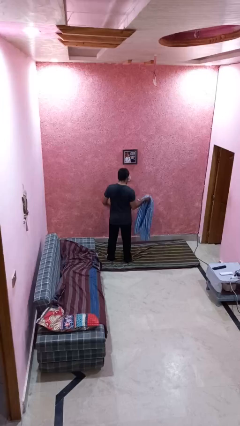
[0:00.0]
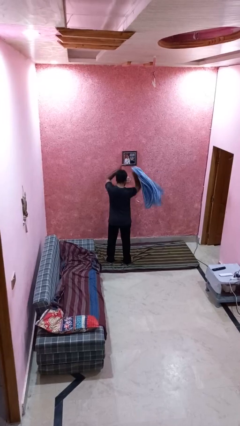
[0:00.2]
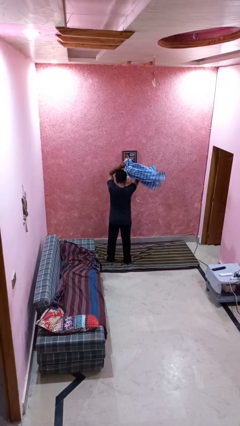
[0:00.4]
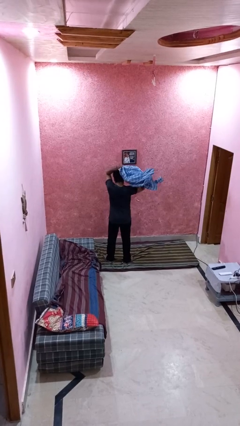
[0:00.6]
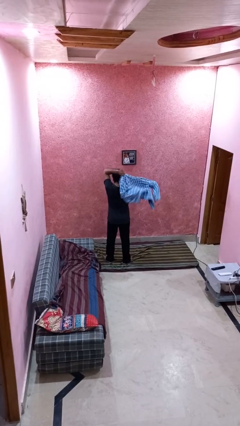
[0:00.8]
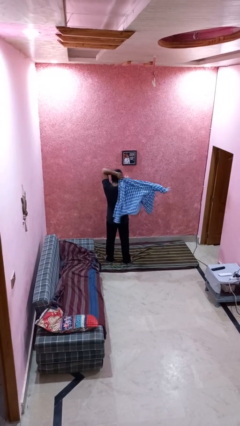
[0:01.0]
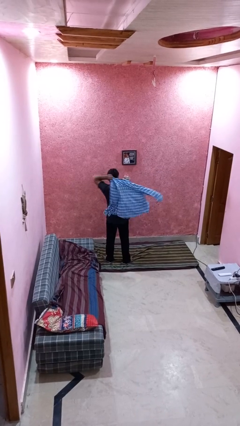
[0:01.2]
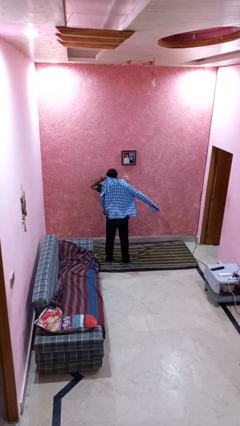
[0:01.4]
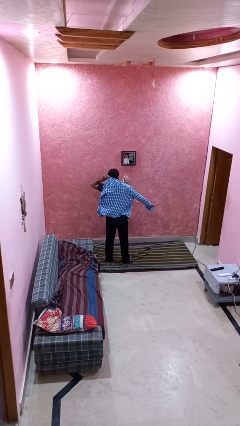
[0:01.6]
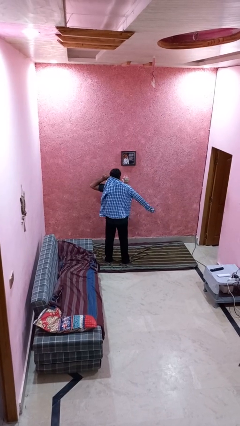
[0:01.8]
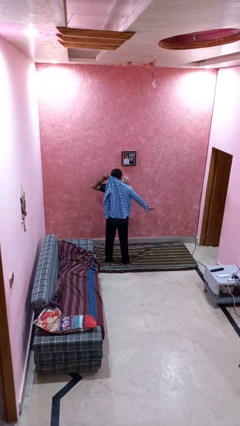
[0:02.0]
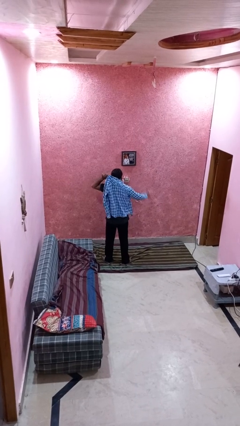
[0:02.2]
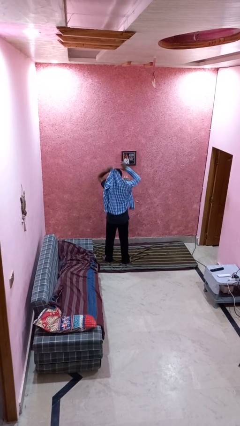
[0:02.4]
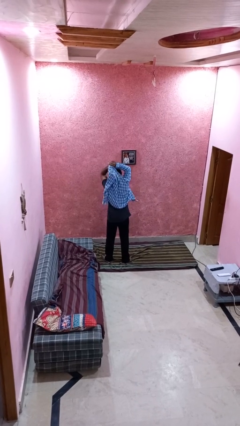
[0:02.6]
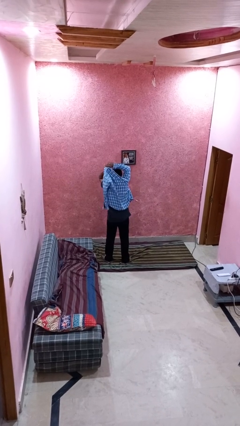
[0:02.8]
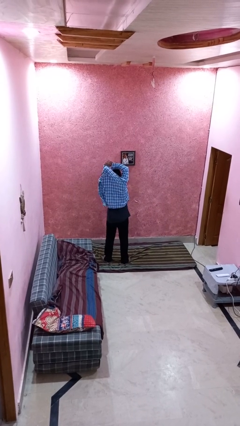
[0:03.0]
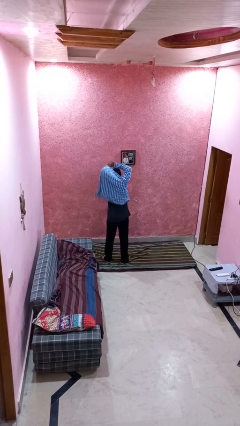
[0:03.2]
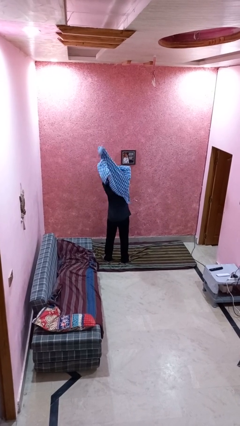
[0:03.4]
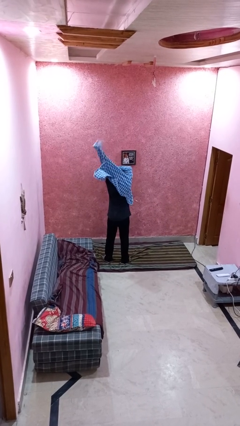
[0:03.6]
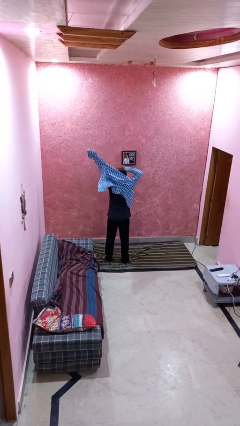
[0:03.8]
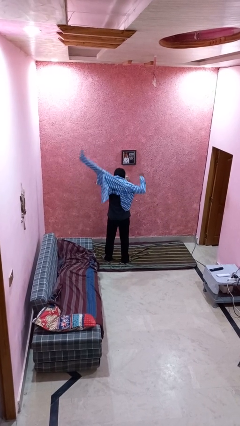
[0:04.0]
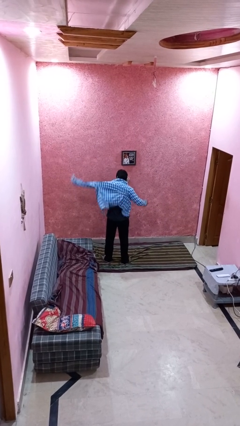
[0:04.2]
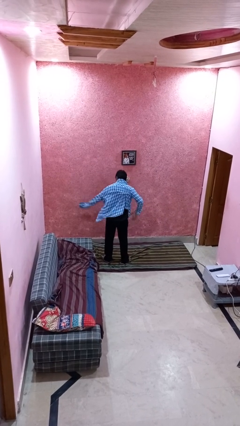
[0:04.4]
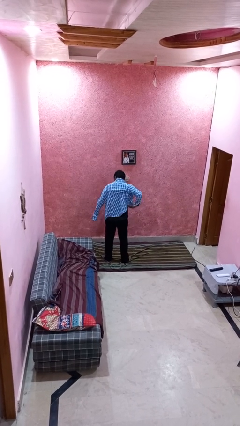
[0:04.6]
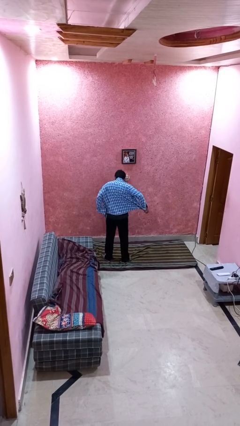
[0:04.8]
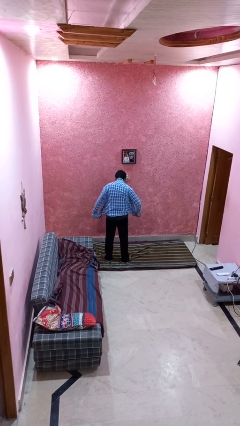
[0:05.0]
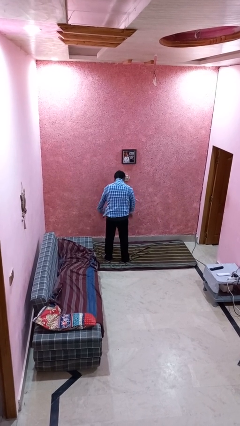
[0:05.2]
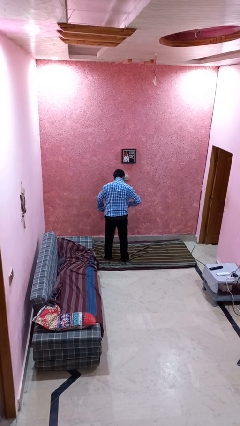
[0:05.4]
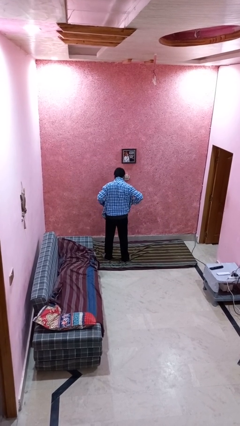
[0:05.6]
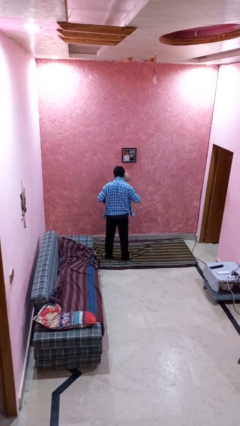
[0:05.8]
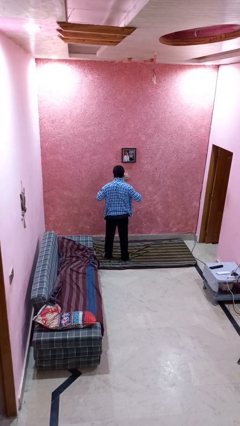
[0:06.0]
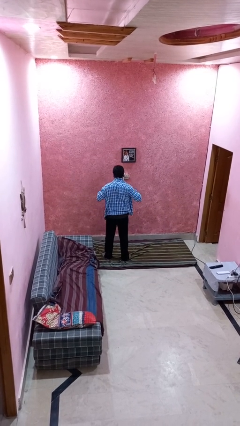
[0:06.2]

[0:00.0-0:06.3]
person puts on shirt

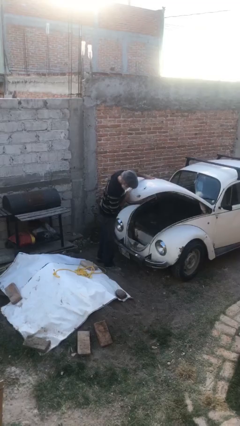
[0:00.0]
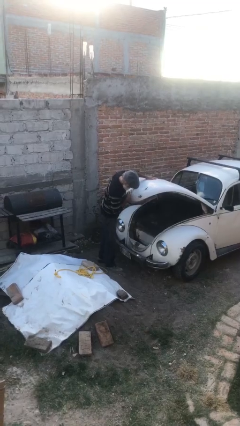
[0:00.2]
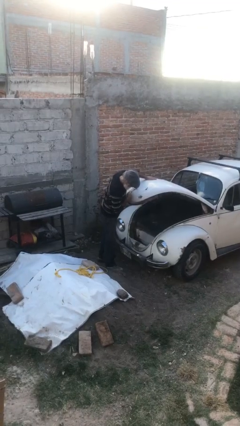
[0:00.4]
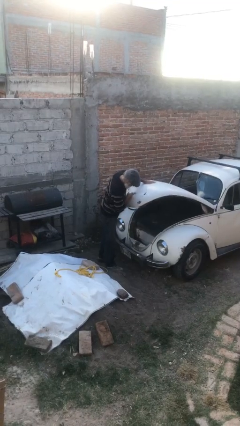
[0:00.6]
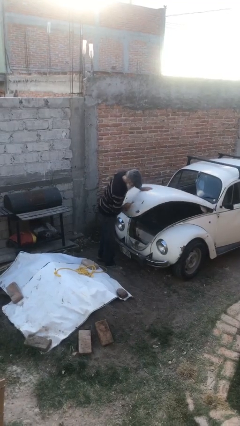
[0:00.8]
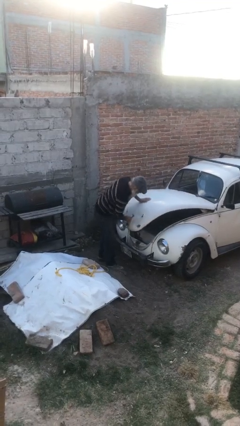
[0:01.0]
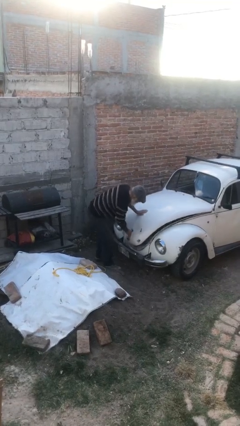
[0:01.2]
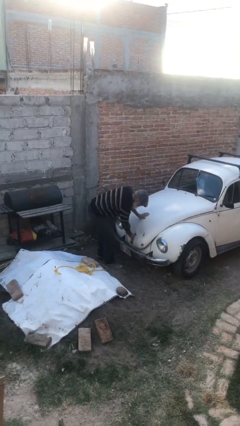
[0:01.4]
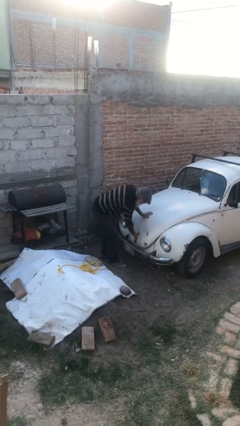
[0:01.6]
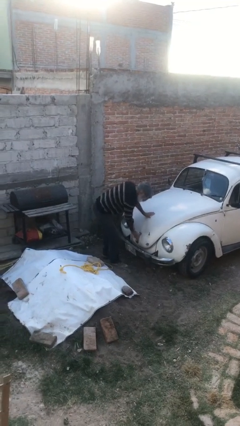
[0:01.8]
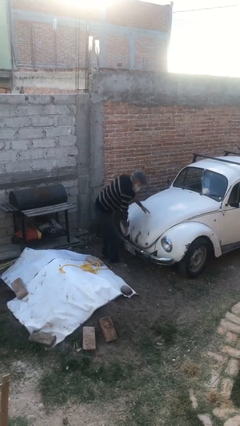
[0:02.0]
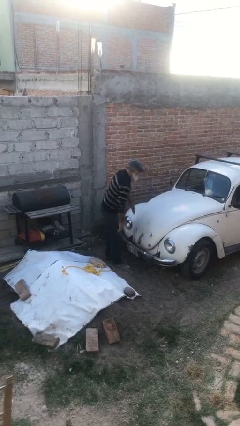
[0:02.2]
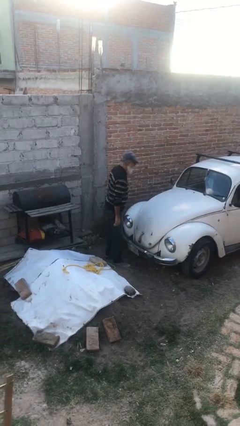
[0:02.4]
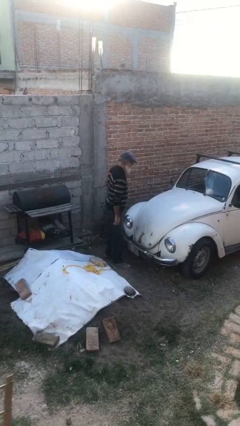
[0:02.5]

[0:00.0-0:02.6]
person closes car trunk

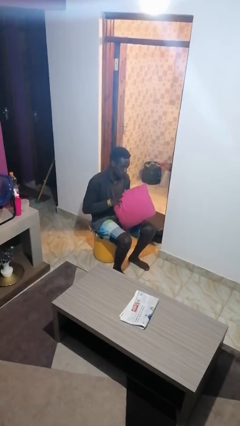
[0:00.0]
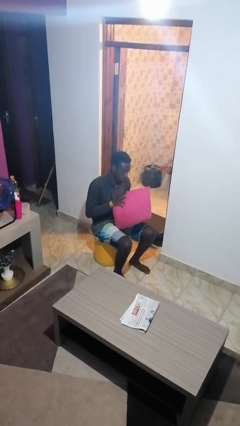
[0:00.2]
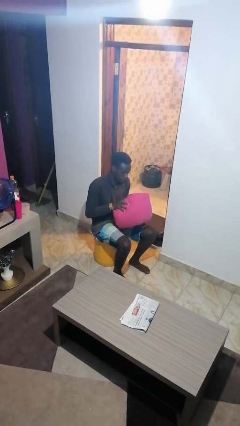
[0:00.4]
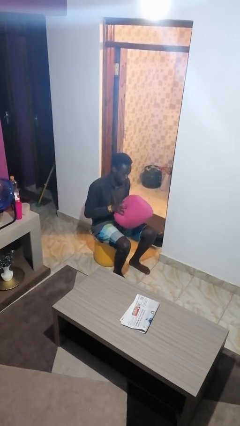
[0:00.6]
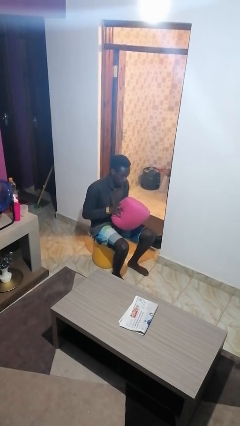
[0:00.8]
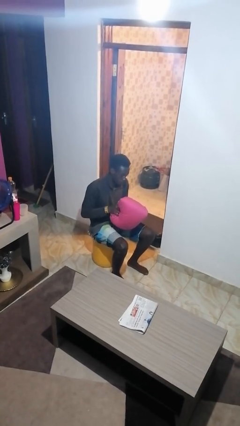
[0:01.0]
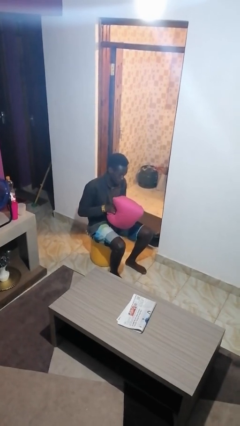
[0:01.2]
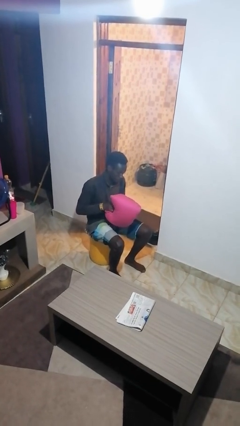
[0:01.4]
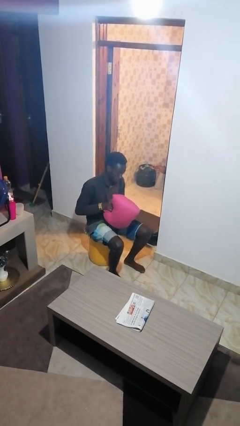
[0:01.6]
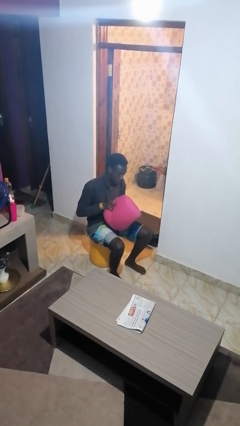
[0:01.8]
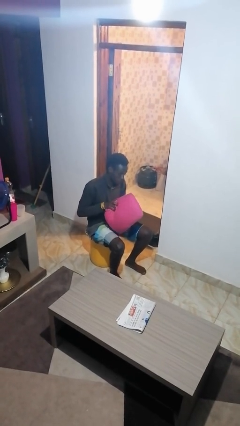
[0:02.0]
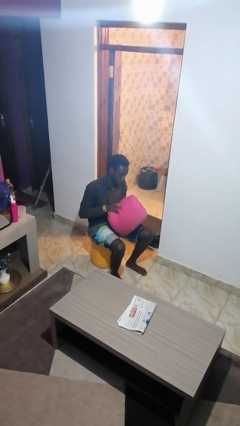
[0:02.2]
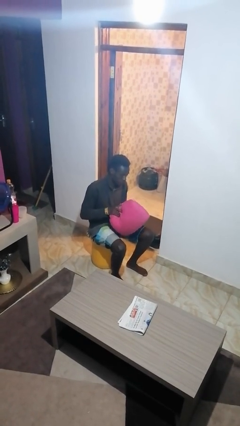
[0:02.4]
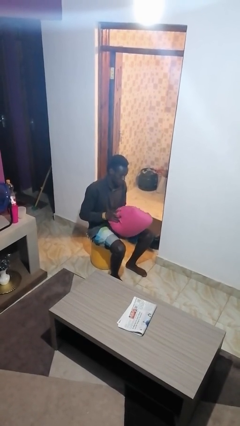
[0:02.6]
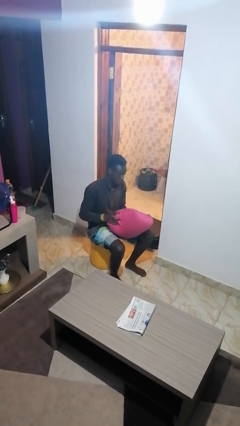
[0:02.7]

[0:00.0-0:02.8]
person squeezes object

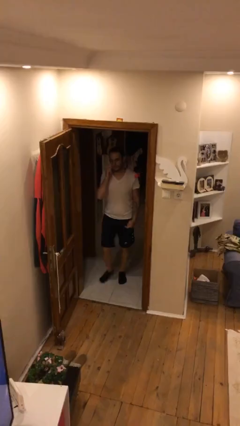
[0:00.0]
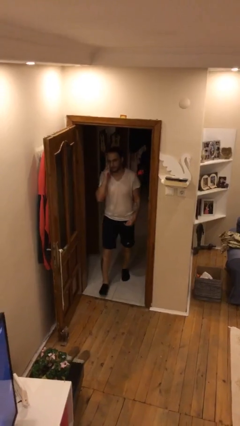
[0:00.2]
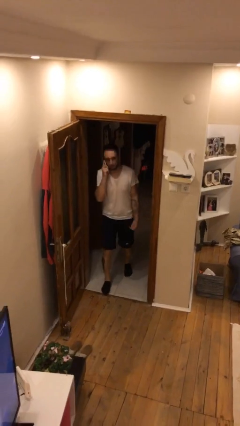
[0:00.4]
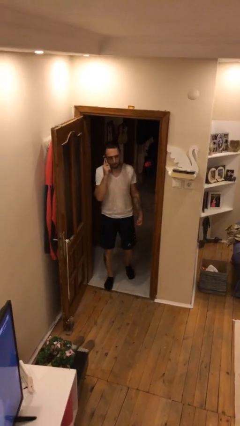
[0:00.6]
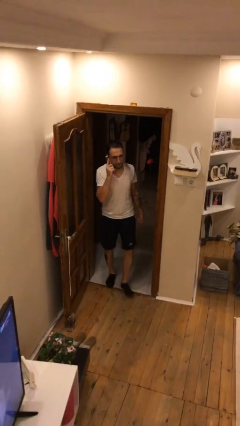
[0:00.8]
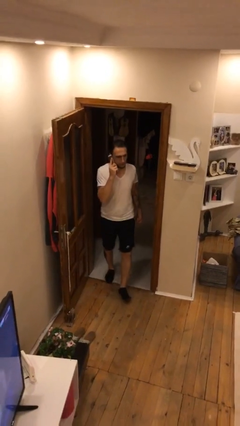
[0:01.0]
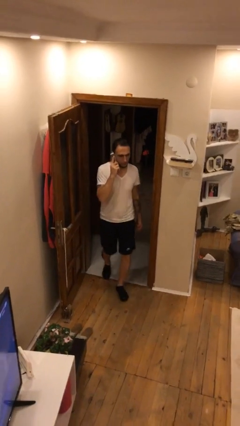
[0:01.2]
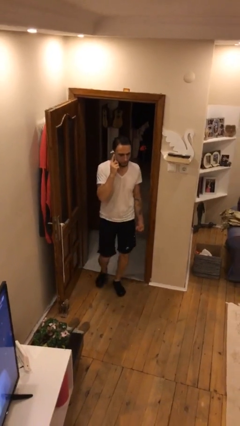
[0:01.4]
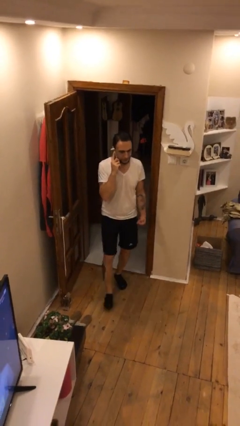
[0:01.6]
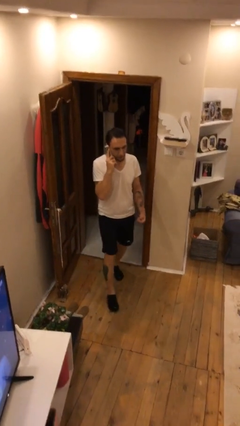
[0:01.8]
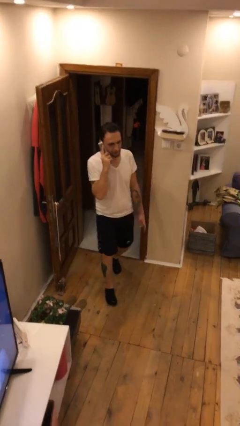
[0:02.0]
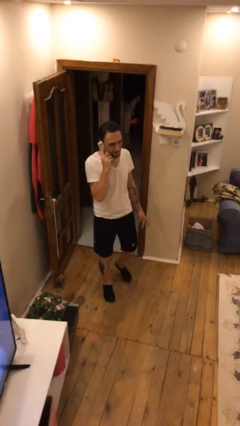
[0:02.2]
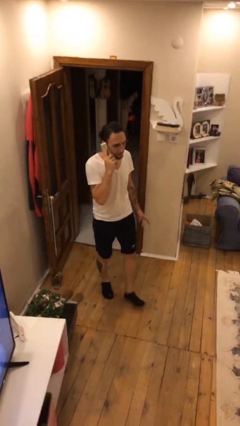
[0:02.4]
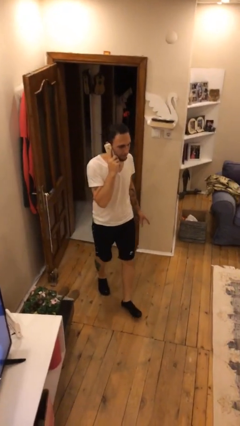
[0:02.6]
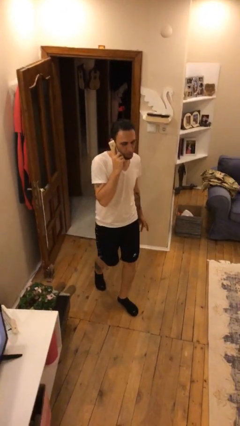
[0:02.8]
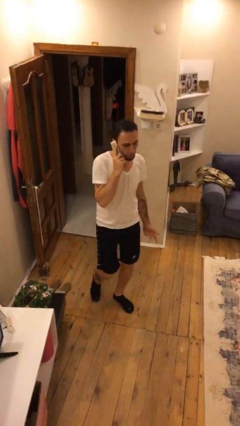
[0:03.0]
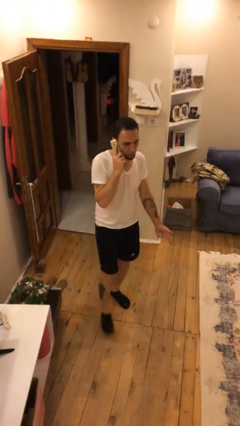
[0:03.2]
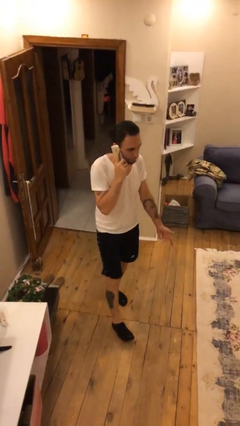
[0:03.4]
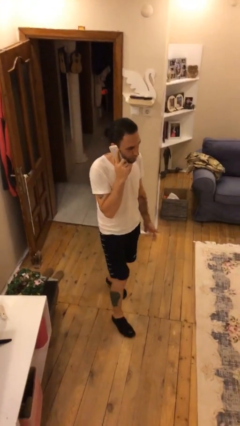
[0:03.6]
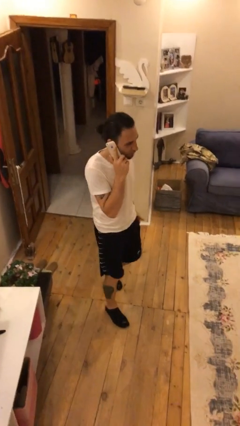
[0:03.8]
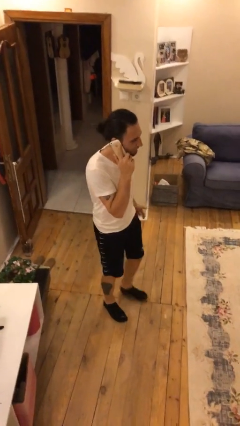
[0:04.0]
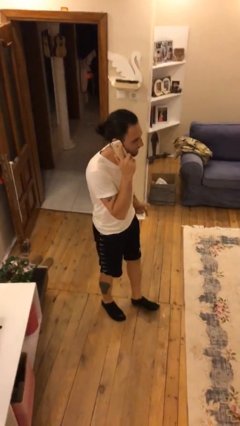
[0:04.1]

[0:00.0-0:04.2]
person enters scene through structure

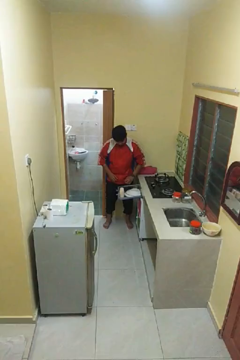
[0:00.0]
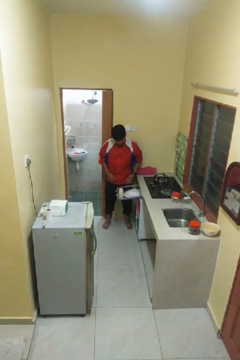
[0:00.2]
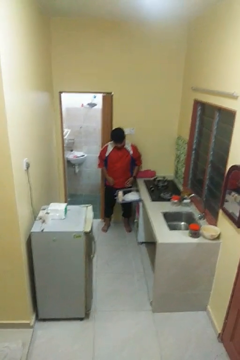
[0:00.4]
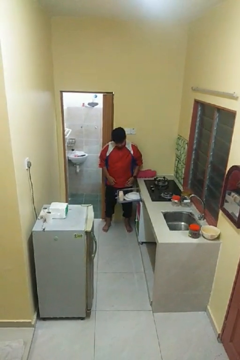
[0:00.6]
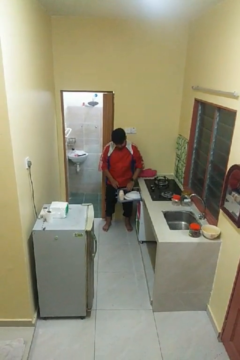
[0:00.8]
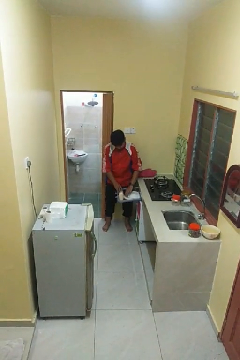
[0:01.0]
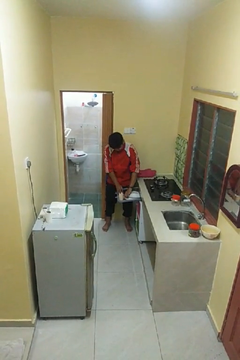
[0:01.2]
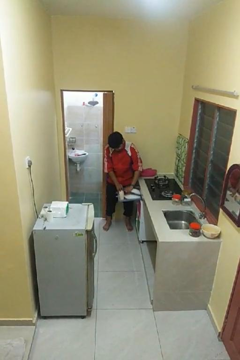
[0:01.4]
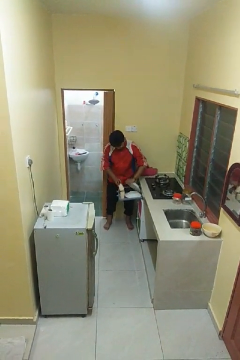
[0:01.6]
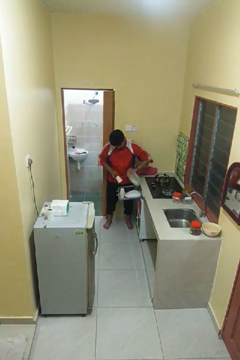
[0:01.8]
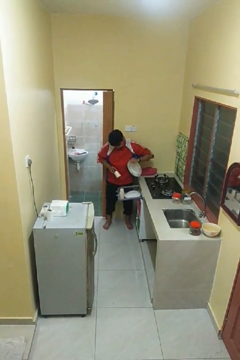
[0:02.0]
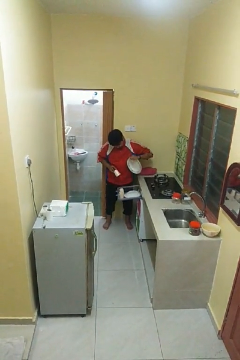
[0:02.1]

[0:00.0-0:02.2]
person takes object from kitchen drawer

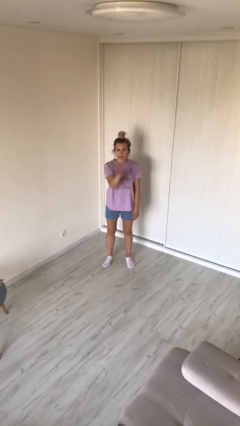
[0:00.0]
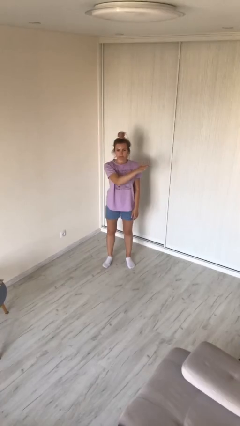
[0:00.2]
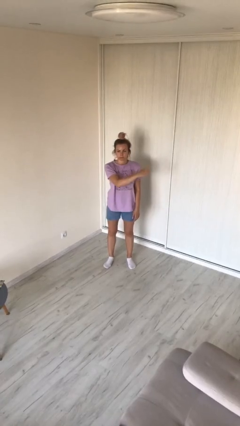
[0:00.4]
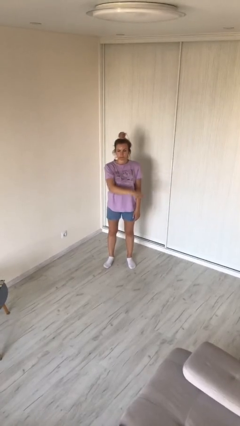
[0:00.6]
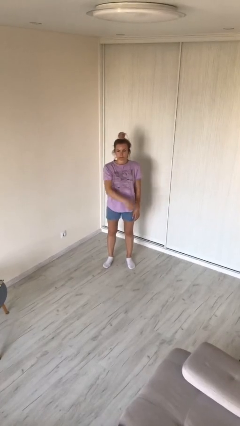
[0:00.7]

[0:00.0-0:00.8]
person gestures swipe left
